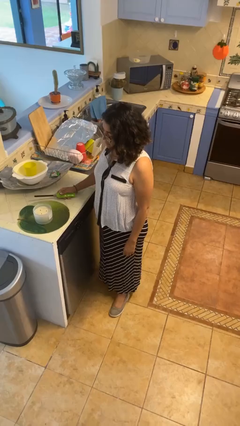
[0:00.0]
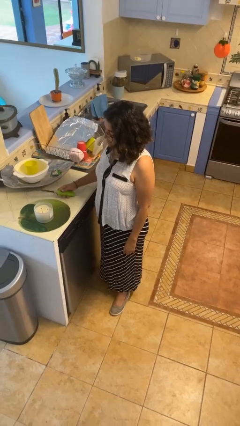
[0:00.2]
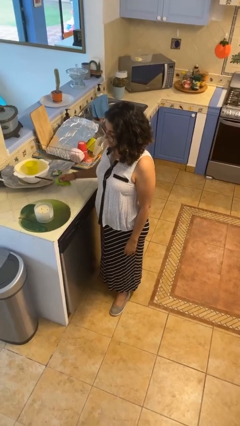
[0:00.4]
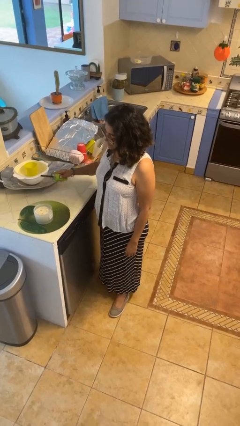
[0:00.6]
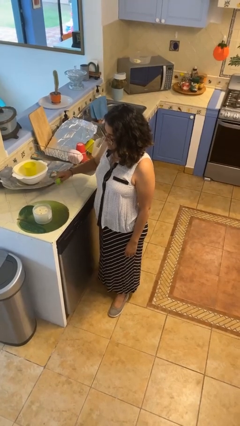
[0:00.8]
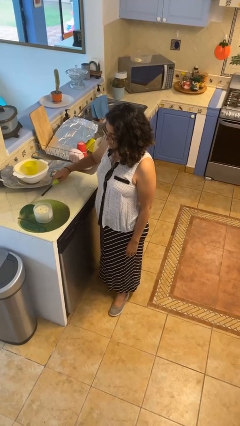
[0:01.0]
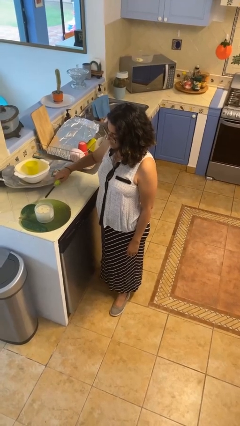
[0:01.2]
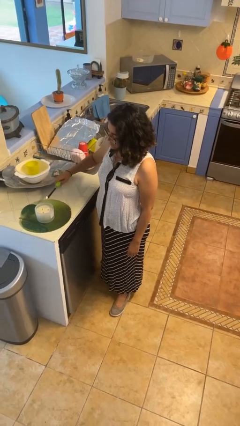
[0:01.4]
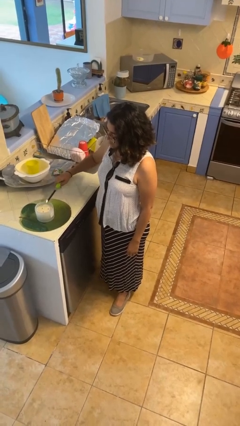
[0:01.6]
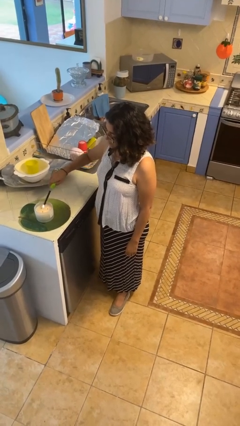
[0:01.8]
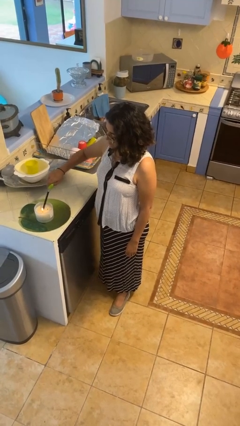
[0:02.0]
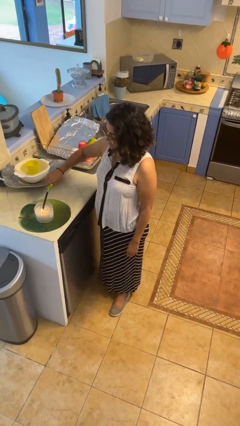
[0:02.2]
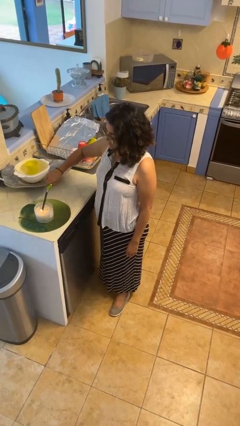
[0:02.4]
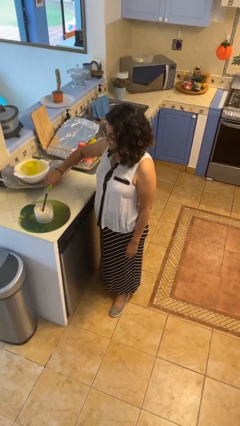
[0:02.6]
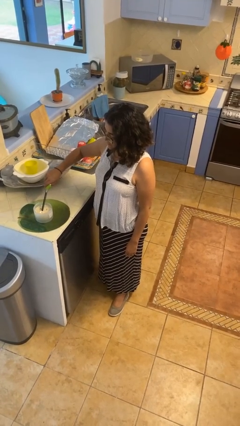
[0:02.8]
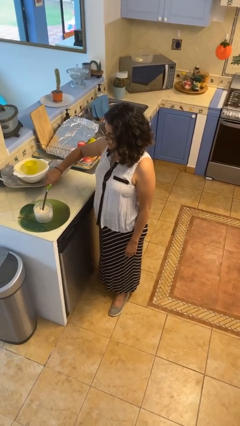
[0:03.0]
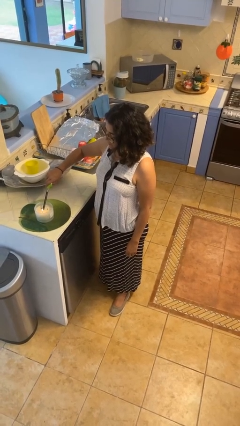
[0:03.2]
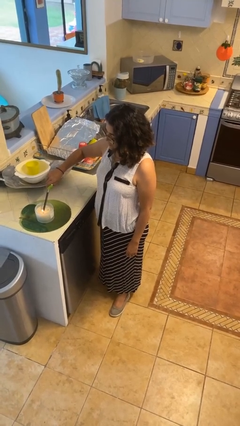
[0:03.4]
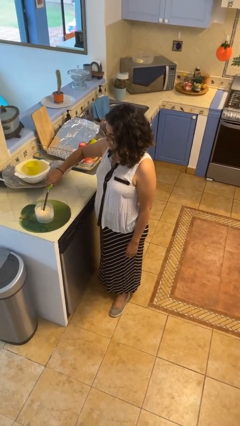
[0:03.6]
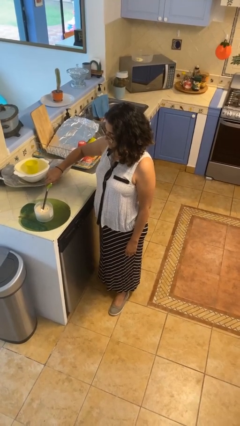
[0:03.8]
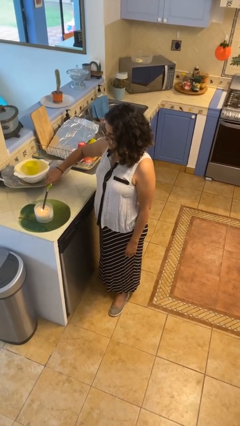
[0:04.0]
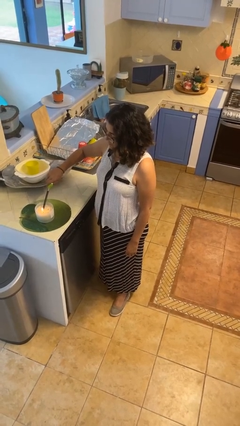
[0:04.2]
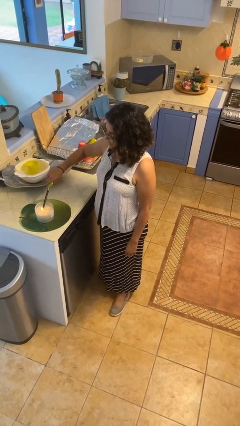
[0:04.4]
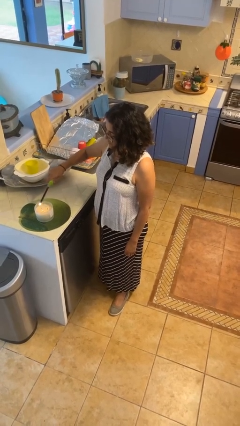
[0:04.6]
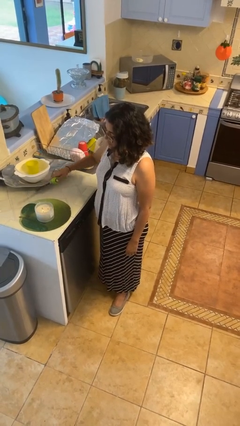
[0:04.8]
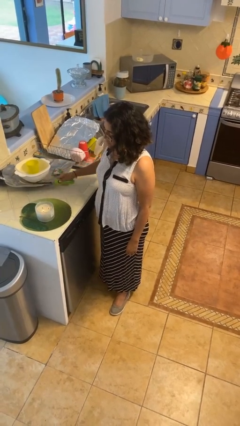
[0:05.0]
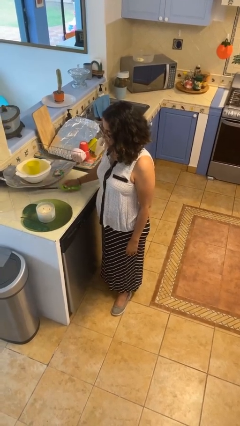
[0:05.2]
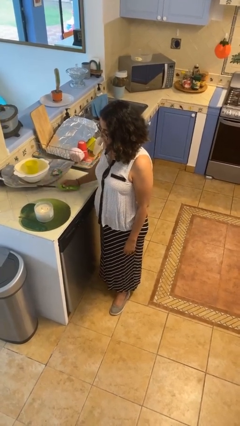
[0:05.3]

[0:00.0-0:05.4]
person lights candle

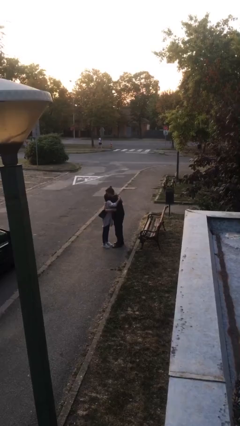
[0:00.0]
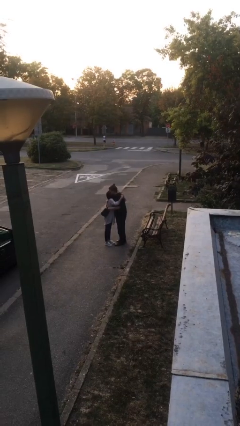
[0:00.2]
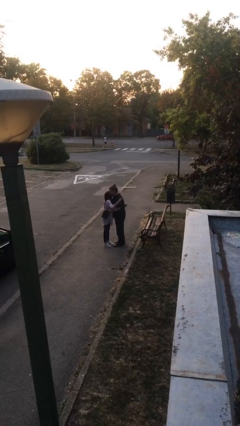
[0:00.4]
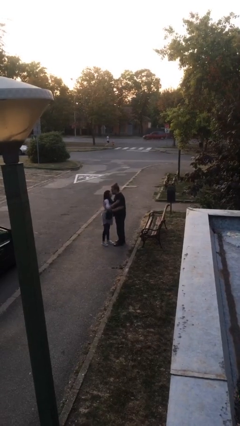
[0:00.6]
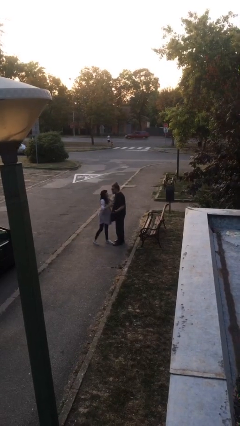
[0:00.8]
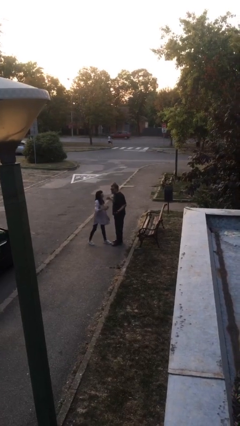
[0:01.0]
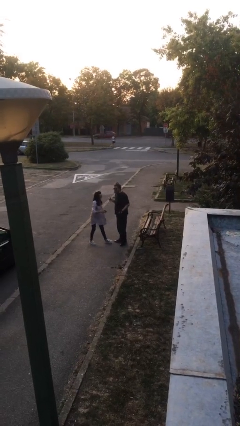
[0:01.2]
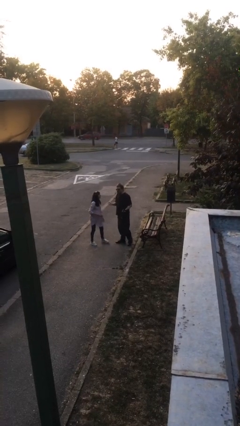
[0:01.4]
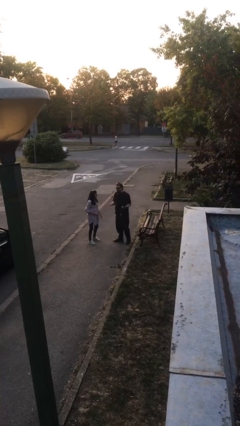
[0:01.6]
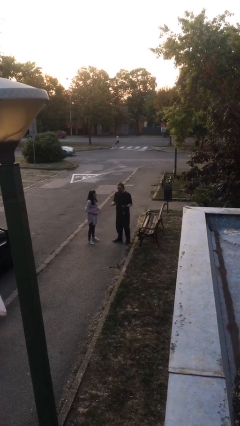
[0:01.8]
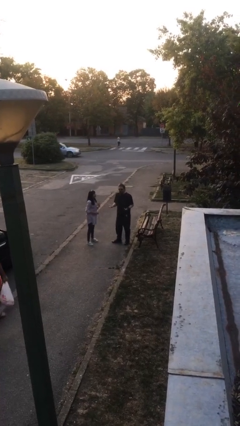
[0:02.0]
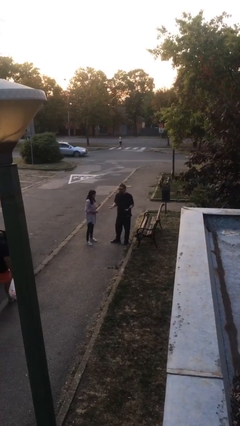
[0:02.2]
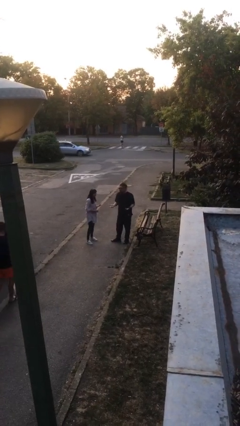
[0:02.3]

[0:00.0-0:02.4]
person talks to person

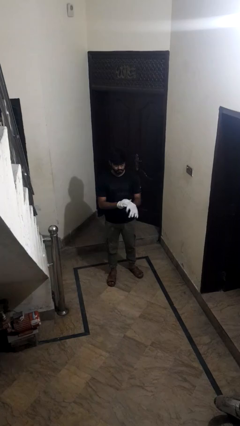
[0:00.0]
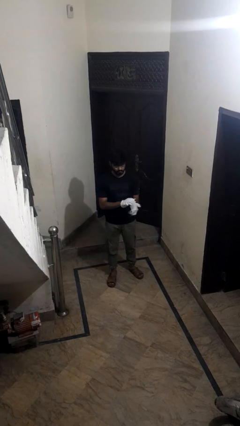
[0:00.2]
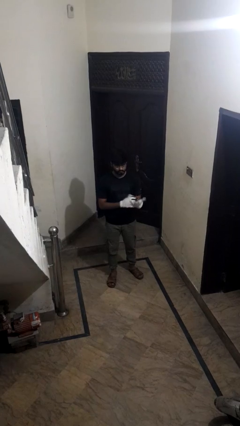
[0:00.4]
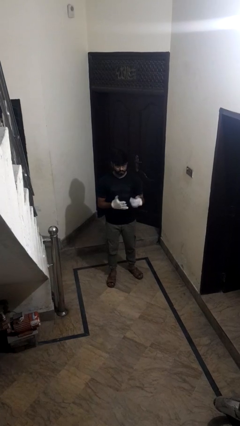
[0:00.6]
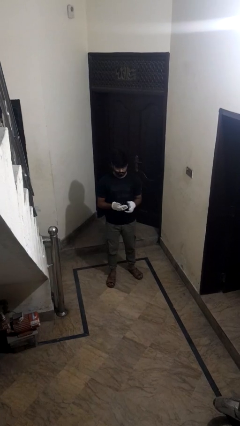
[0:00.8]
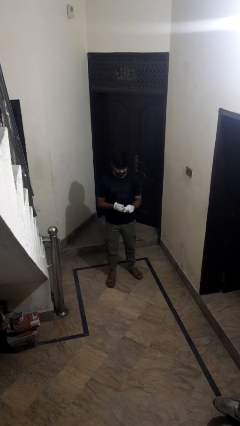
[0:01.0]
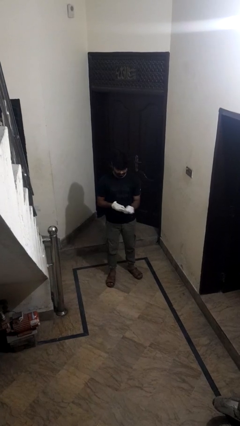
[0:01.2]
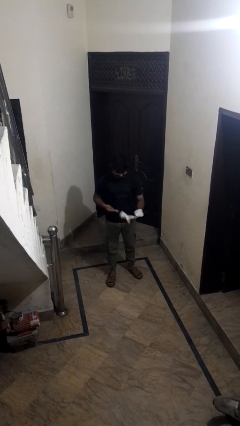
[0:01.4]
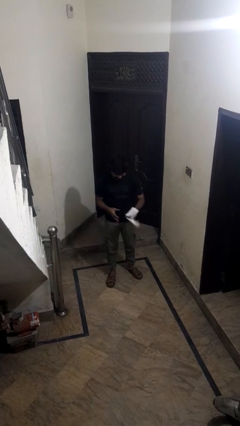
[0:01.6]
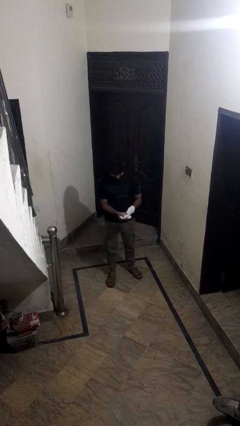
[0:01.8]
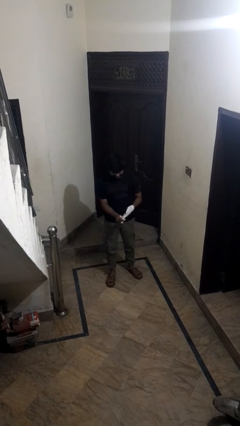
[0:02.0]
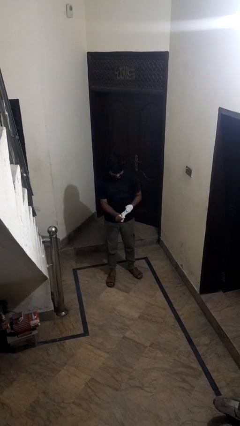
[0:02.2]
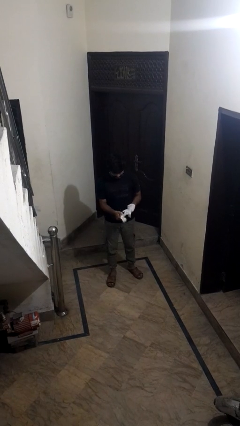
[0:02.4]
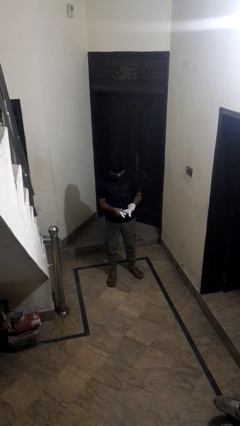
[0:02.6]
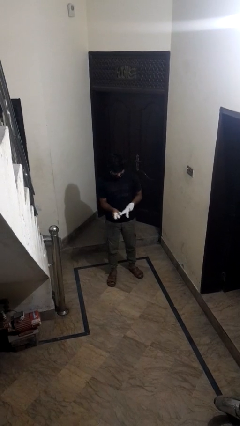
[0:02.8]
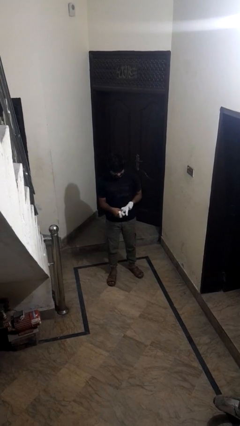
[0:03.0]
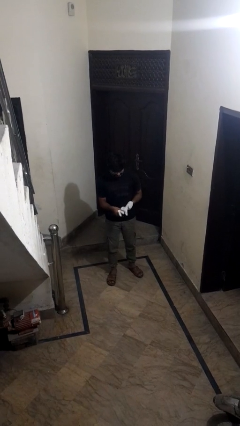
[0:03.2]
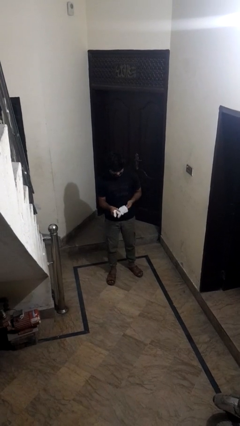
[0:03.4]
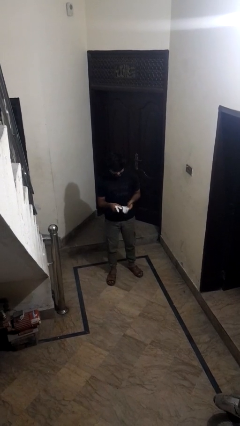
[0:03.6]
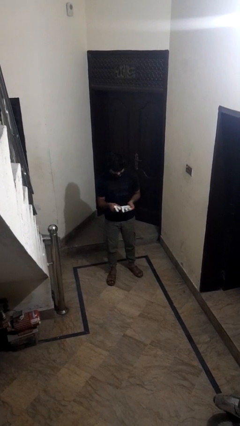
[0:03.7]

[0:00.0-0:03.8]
person takes off gloves

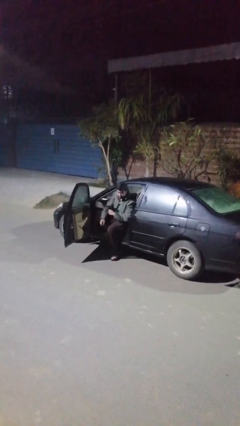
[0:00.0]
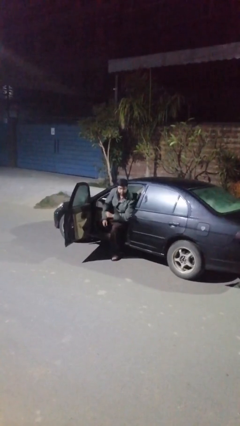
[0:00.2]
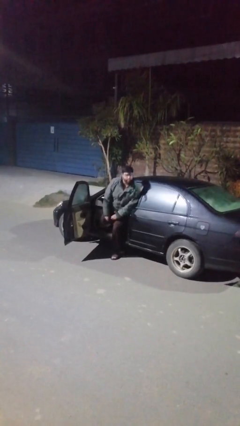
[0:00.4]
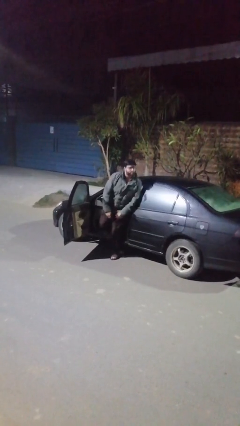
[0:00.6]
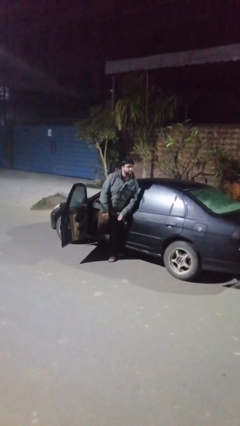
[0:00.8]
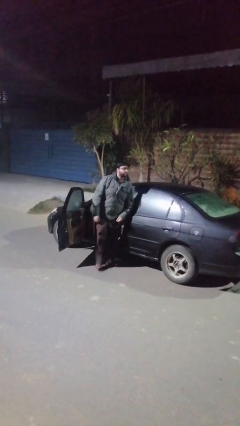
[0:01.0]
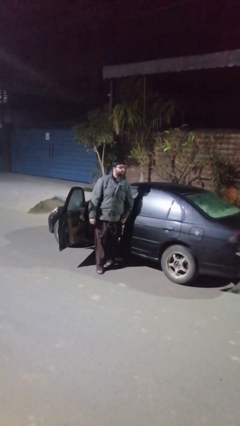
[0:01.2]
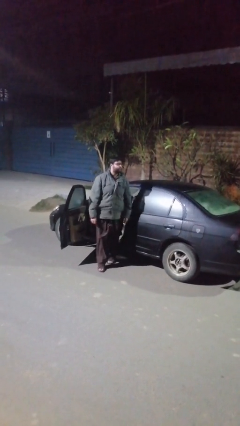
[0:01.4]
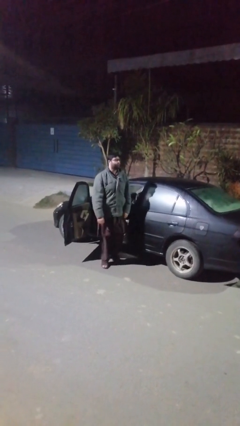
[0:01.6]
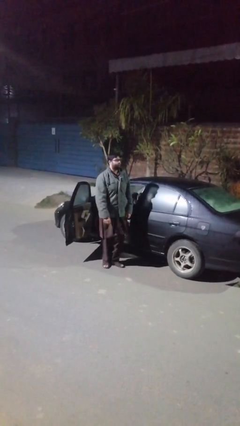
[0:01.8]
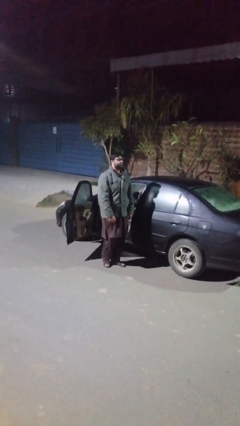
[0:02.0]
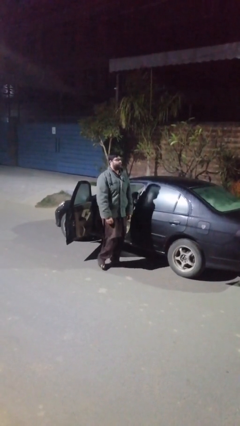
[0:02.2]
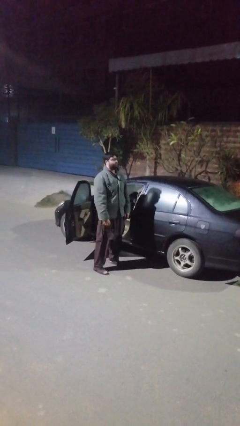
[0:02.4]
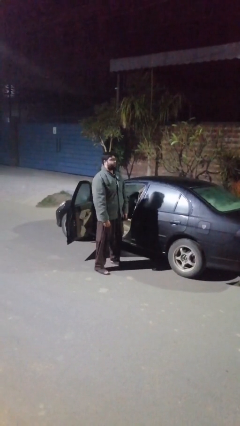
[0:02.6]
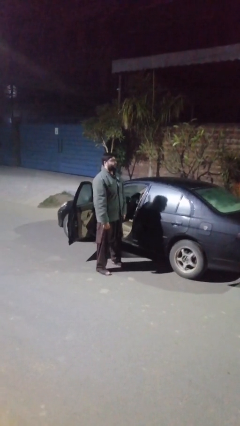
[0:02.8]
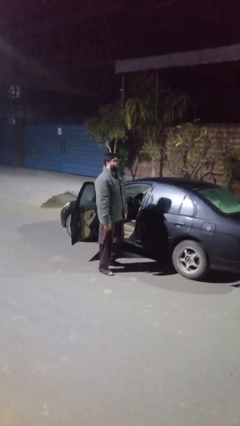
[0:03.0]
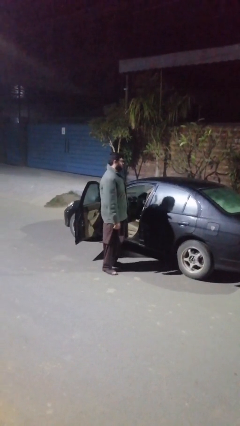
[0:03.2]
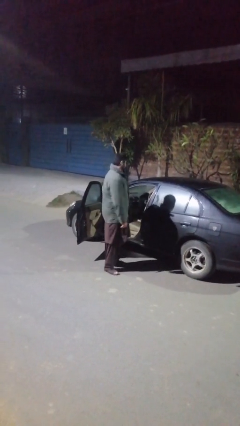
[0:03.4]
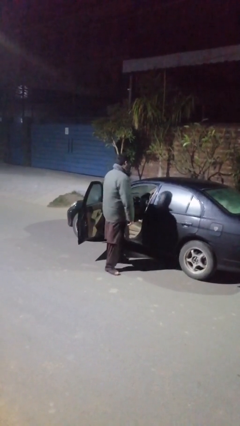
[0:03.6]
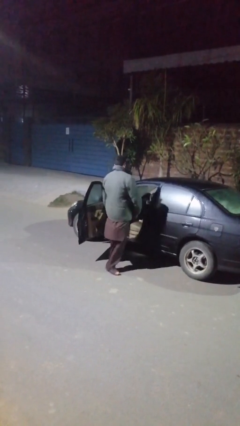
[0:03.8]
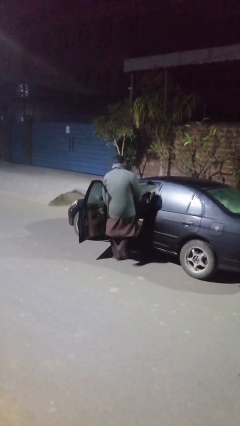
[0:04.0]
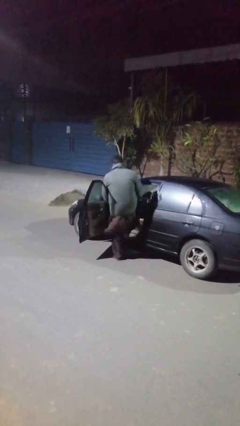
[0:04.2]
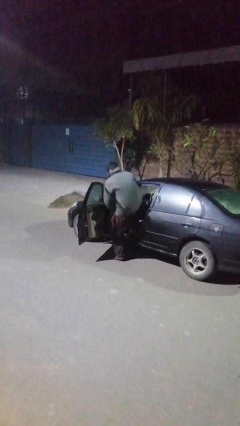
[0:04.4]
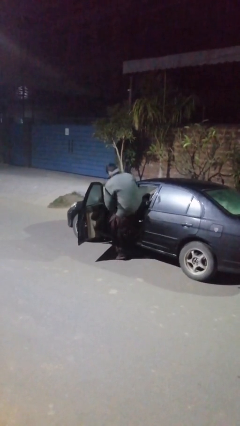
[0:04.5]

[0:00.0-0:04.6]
person exits car

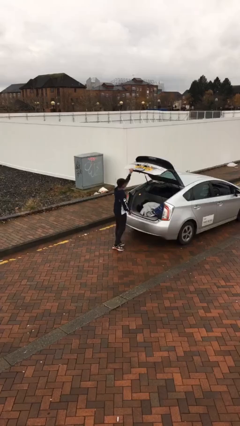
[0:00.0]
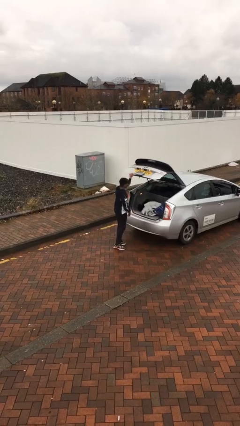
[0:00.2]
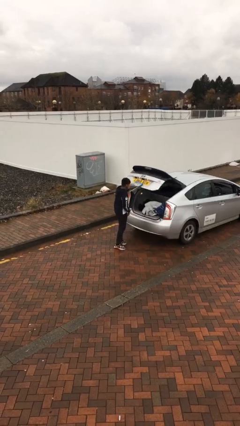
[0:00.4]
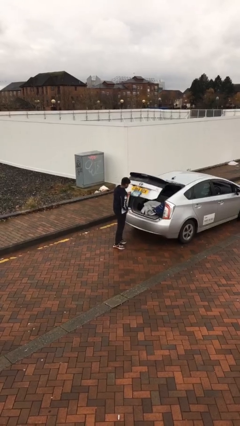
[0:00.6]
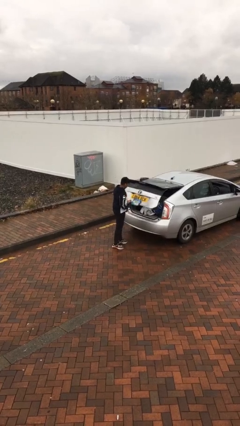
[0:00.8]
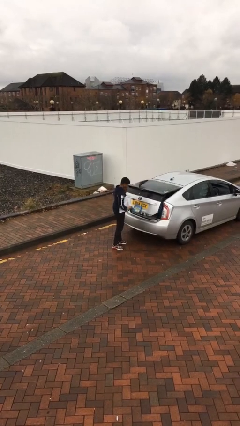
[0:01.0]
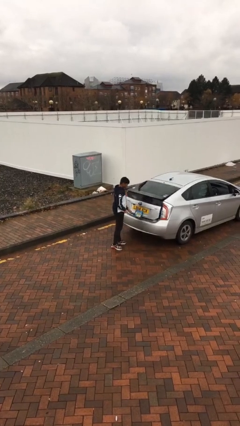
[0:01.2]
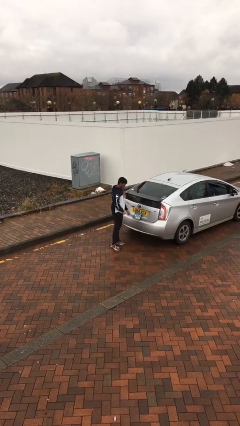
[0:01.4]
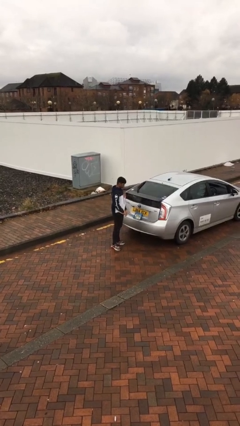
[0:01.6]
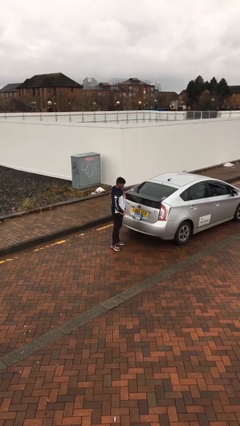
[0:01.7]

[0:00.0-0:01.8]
person closes car trunk
